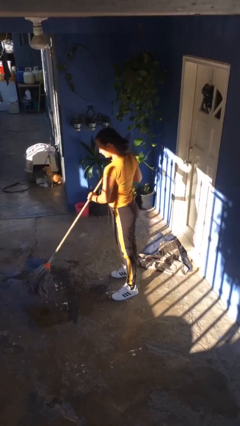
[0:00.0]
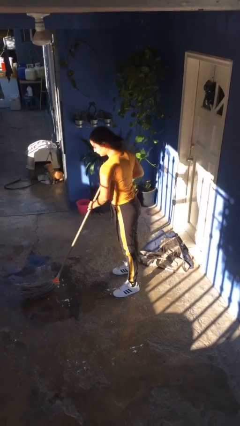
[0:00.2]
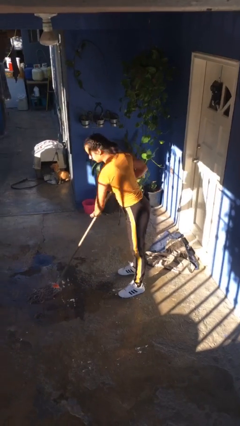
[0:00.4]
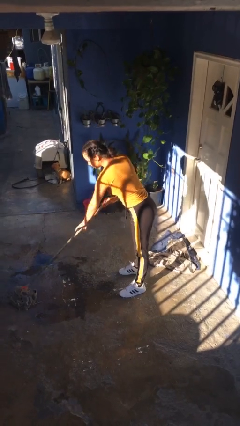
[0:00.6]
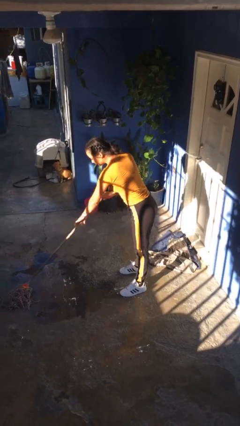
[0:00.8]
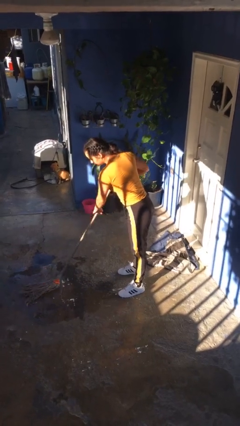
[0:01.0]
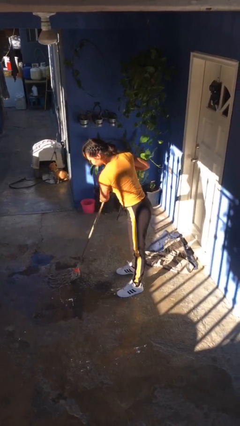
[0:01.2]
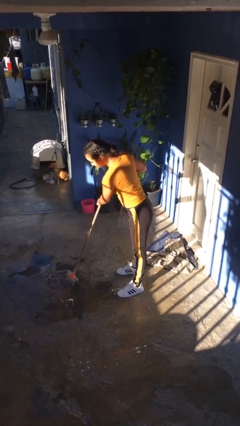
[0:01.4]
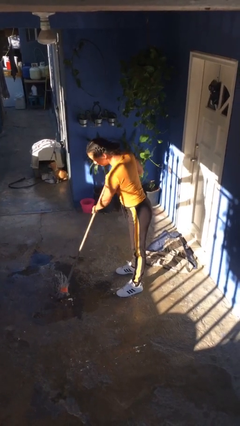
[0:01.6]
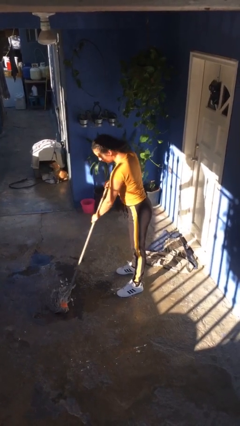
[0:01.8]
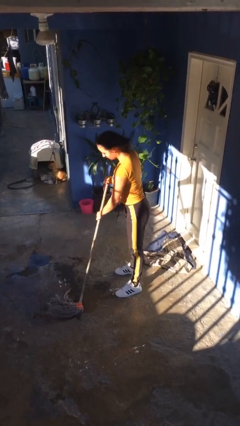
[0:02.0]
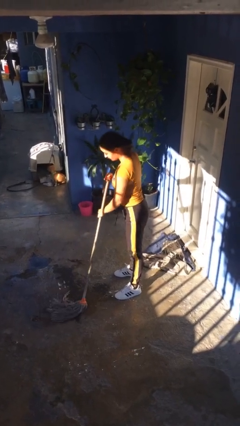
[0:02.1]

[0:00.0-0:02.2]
person mops

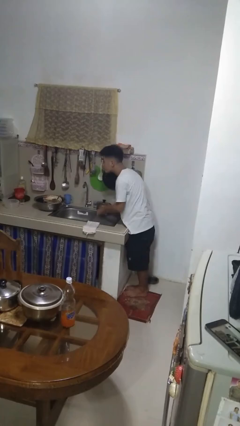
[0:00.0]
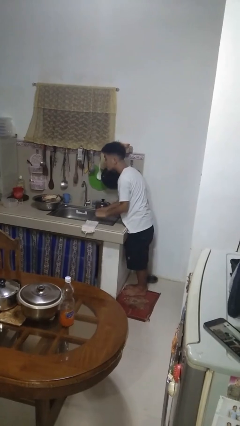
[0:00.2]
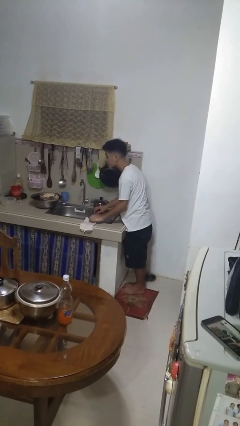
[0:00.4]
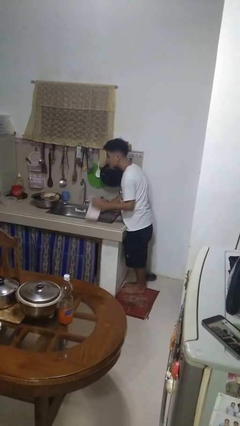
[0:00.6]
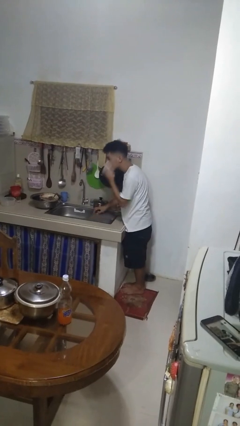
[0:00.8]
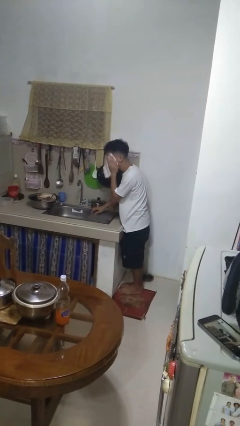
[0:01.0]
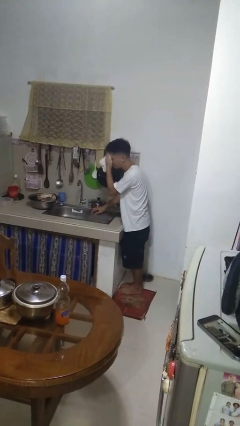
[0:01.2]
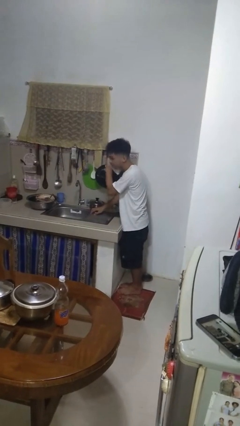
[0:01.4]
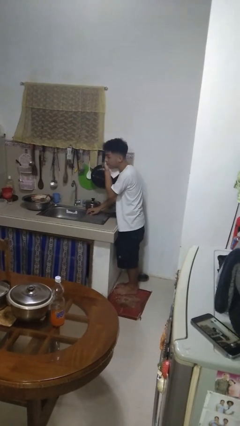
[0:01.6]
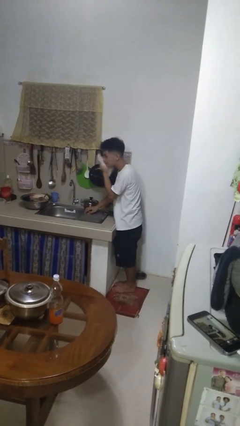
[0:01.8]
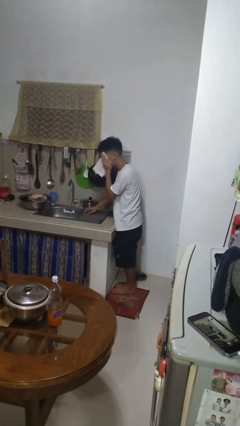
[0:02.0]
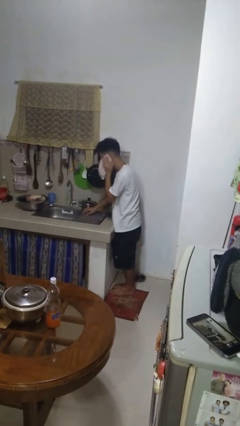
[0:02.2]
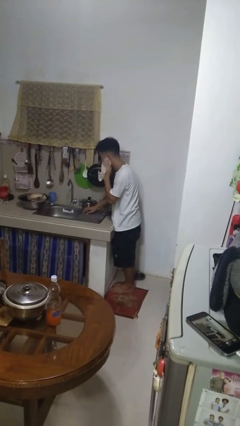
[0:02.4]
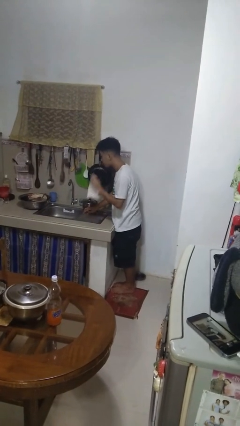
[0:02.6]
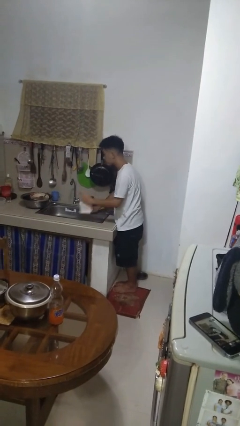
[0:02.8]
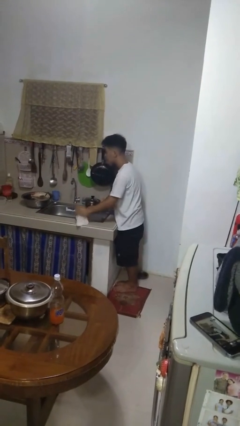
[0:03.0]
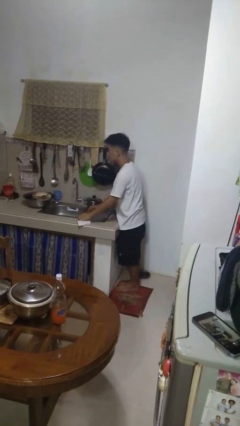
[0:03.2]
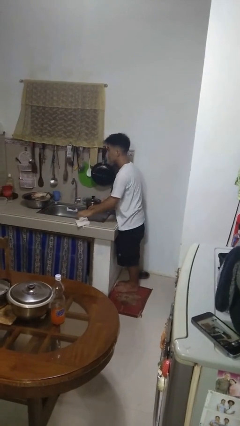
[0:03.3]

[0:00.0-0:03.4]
person dries face with towel

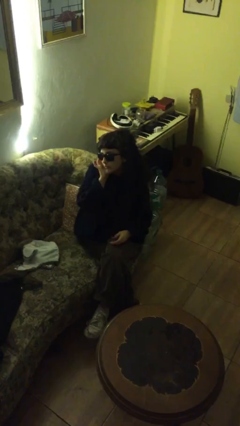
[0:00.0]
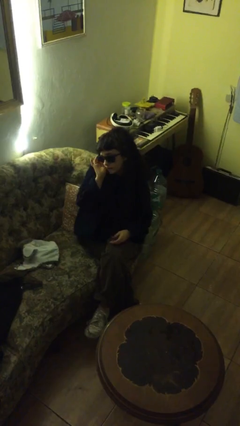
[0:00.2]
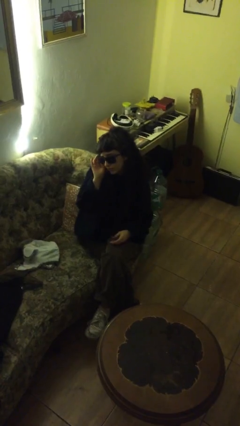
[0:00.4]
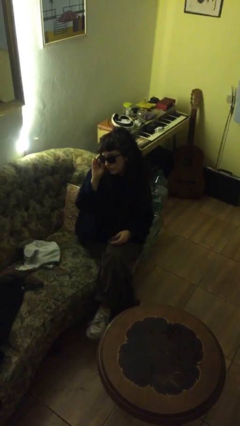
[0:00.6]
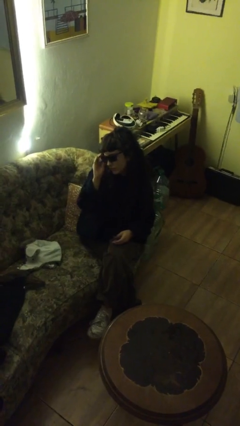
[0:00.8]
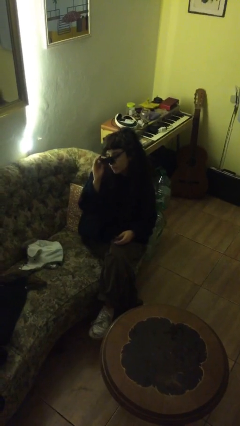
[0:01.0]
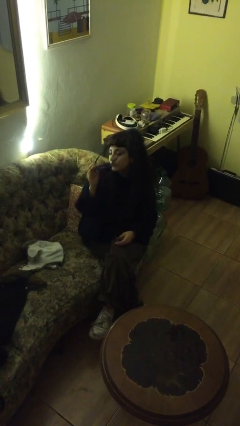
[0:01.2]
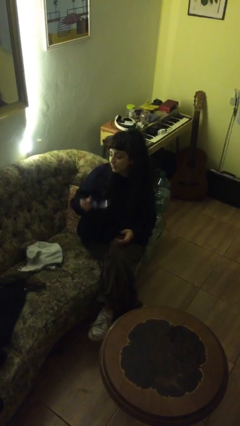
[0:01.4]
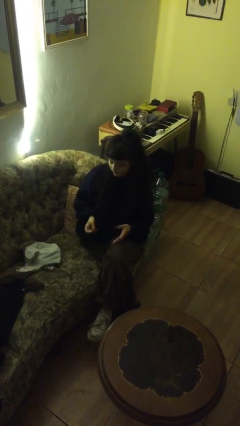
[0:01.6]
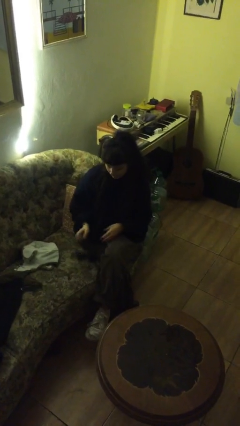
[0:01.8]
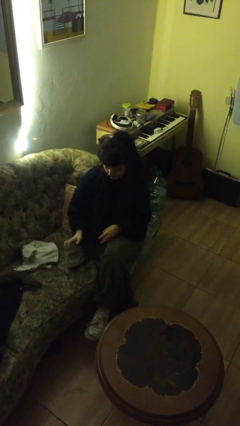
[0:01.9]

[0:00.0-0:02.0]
person takes off sunglasses

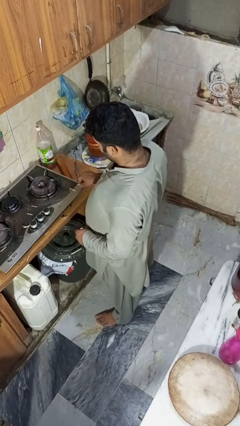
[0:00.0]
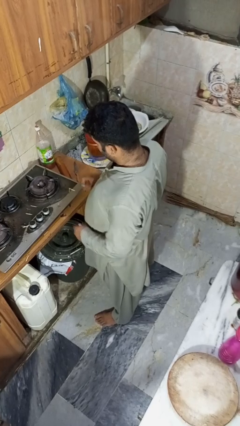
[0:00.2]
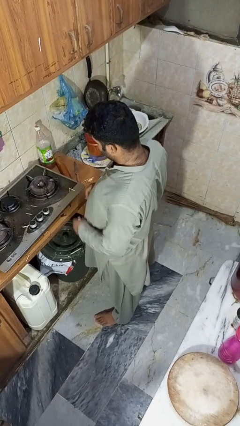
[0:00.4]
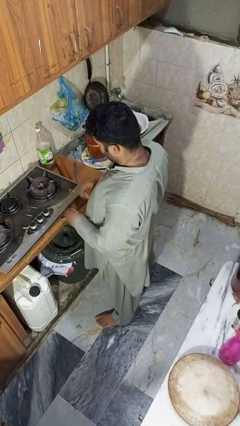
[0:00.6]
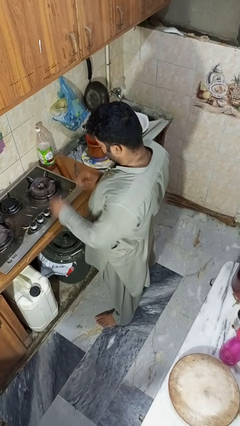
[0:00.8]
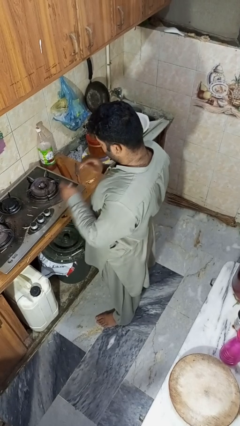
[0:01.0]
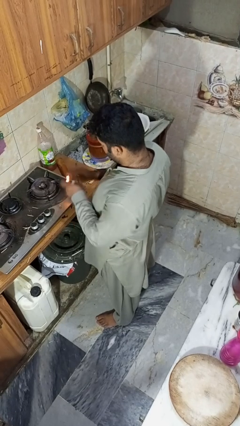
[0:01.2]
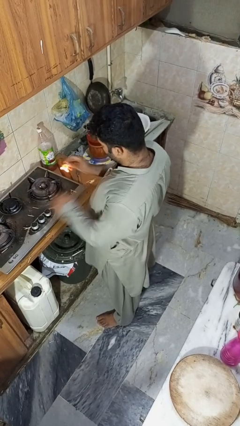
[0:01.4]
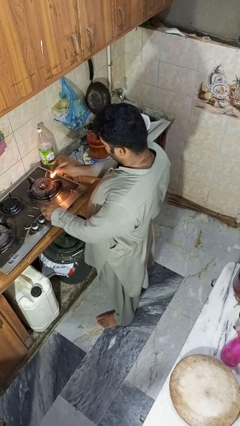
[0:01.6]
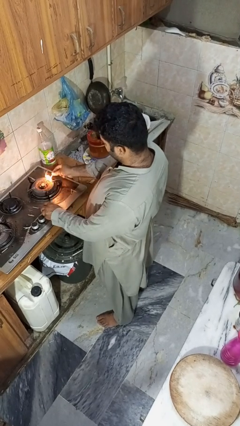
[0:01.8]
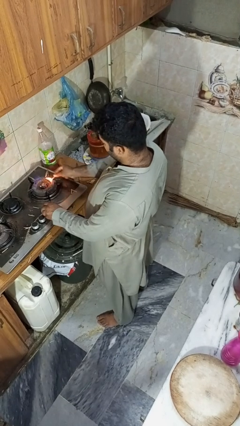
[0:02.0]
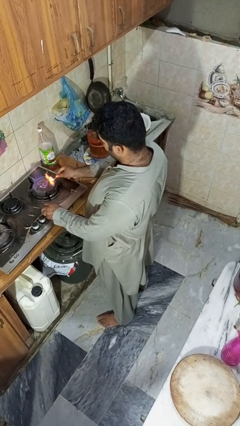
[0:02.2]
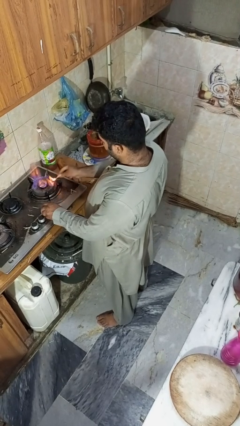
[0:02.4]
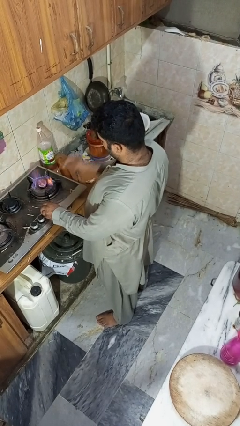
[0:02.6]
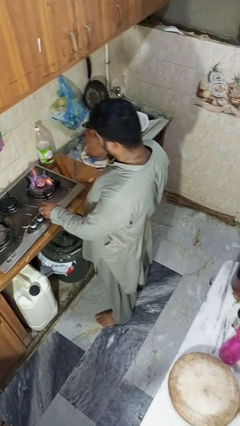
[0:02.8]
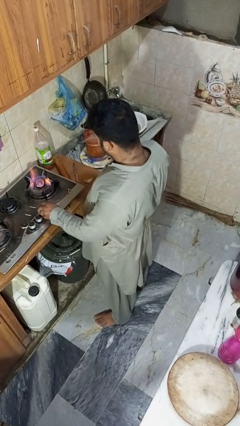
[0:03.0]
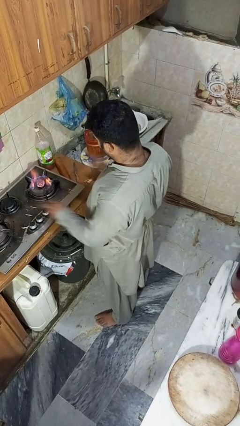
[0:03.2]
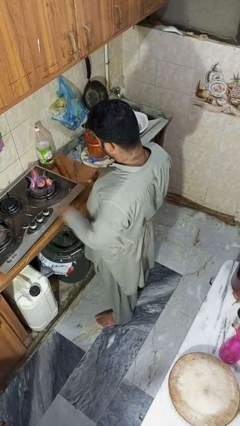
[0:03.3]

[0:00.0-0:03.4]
person turns on stovetop

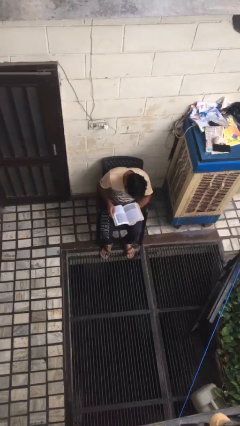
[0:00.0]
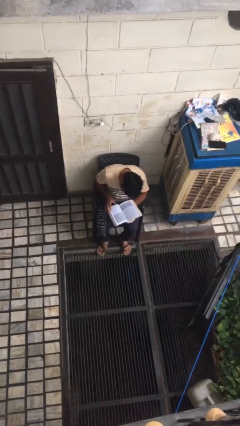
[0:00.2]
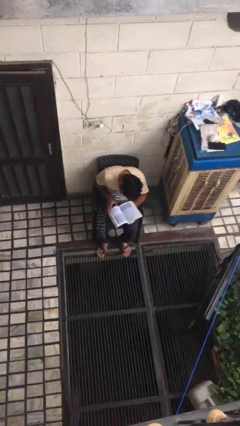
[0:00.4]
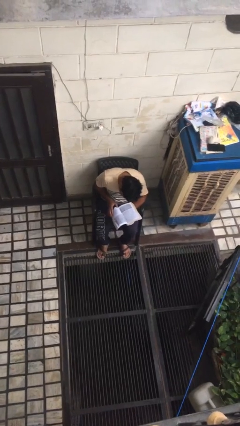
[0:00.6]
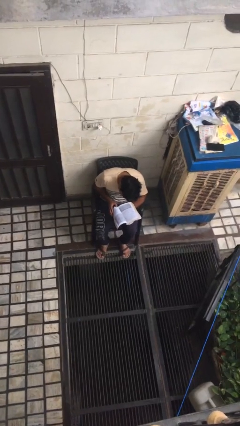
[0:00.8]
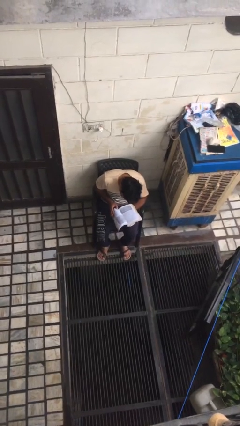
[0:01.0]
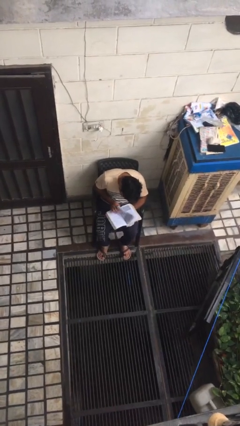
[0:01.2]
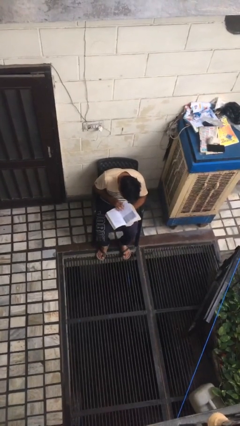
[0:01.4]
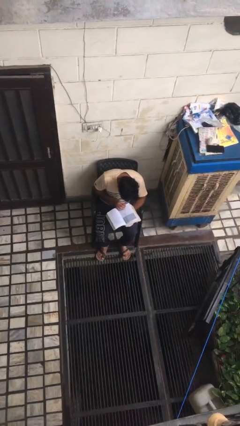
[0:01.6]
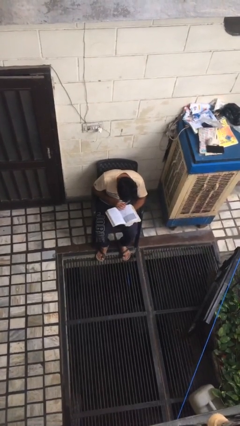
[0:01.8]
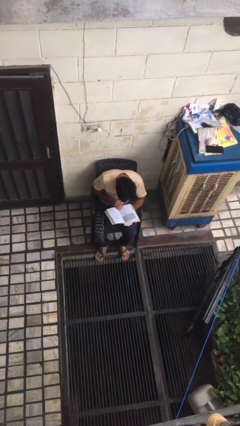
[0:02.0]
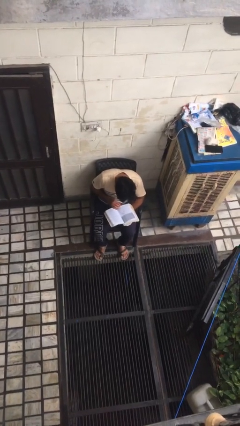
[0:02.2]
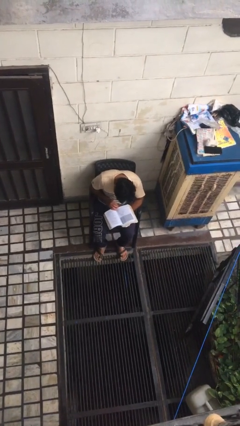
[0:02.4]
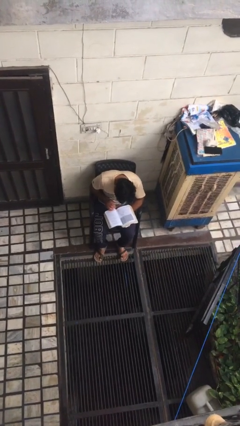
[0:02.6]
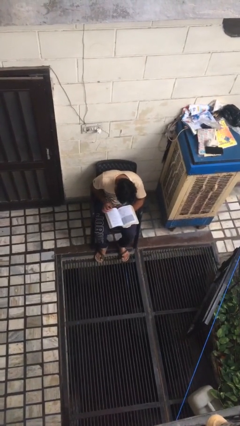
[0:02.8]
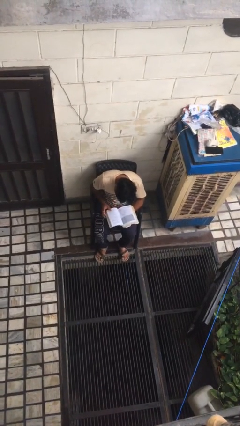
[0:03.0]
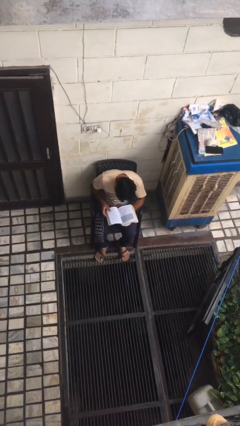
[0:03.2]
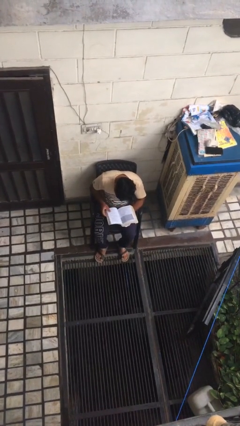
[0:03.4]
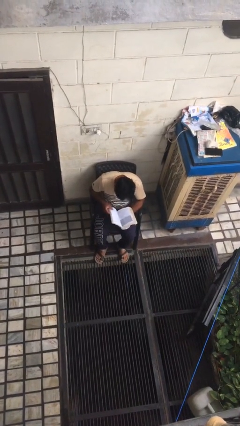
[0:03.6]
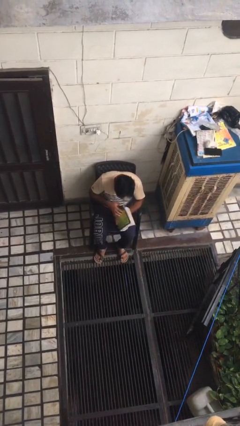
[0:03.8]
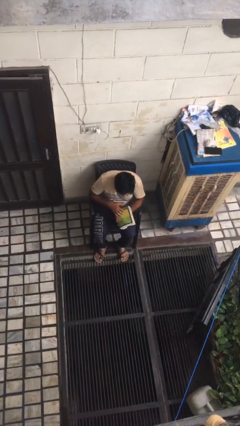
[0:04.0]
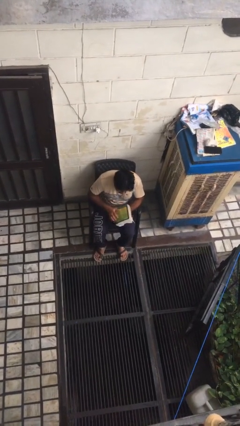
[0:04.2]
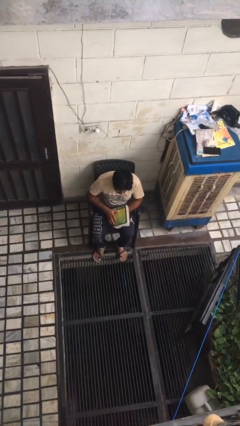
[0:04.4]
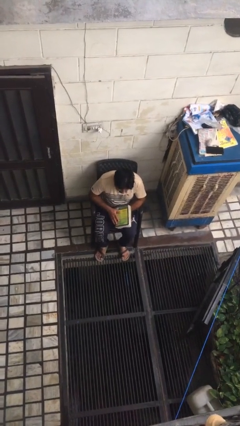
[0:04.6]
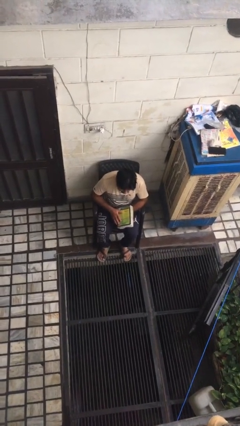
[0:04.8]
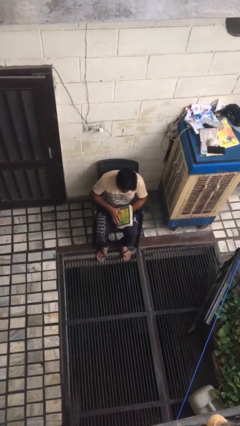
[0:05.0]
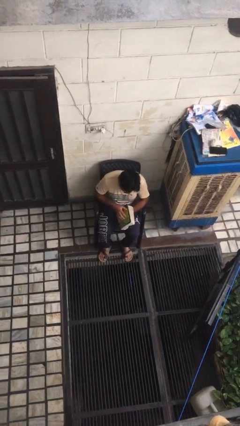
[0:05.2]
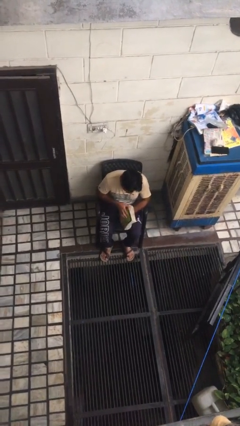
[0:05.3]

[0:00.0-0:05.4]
person reads book

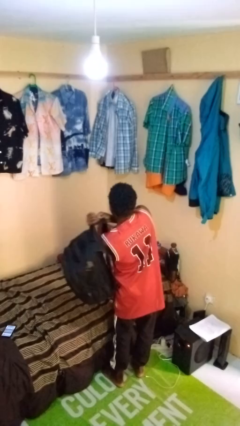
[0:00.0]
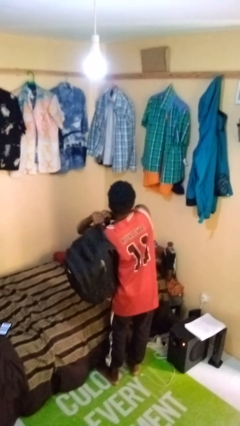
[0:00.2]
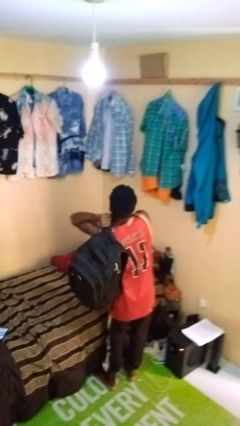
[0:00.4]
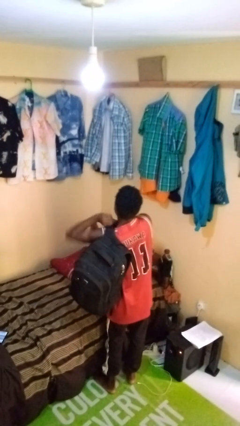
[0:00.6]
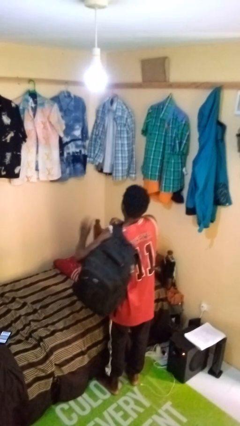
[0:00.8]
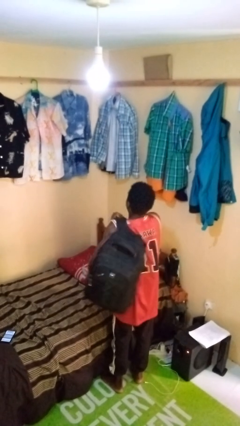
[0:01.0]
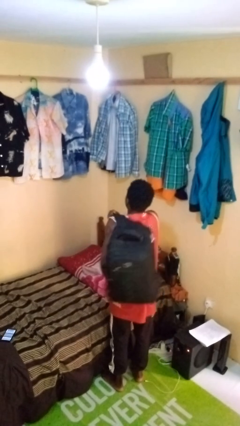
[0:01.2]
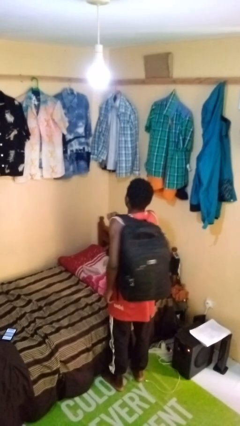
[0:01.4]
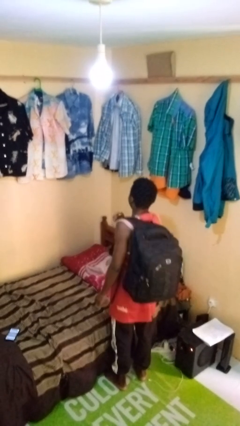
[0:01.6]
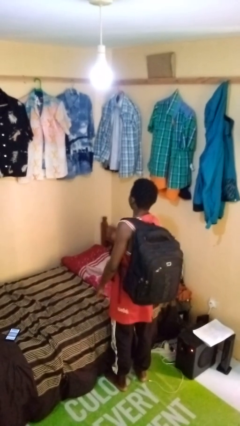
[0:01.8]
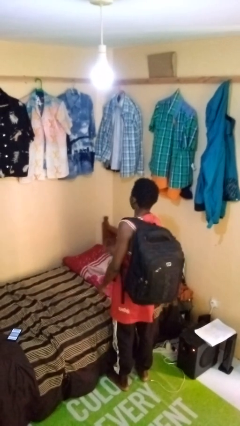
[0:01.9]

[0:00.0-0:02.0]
person puts on backpack
